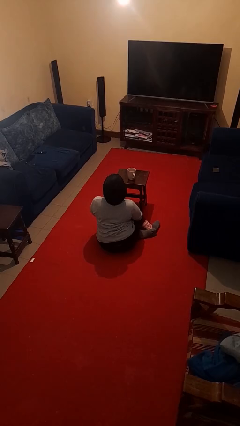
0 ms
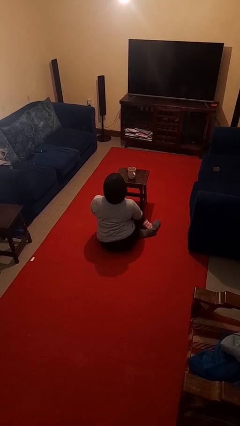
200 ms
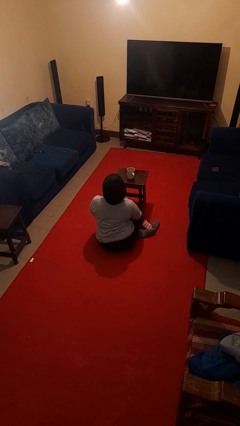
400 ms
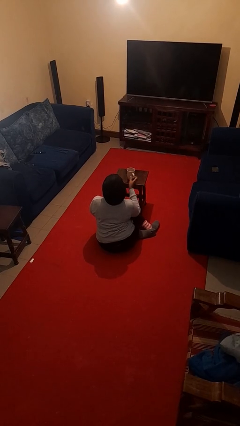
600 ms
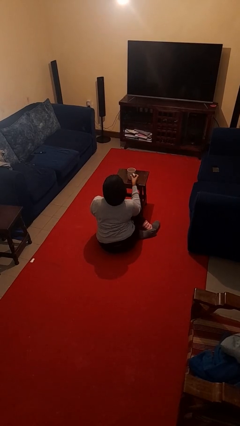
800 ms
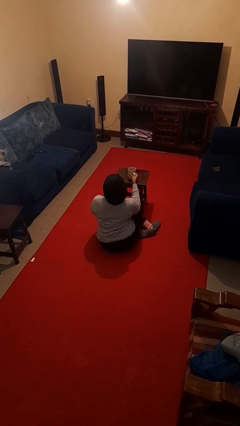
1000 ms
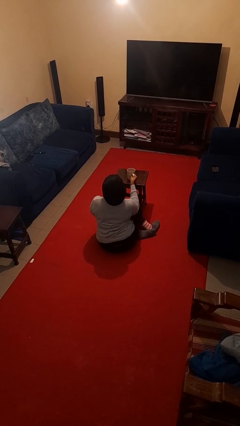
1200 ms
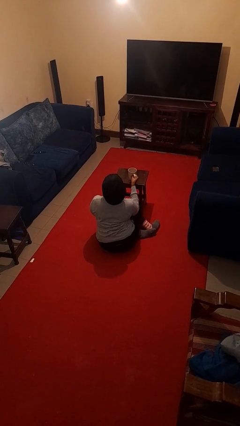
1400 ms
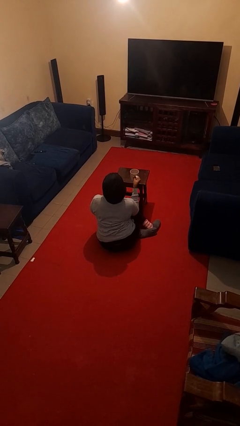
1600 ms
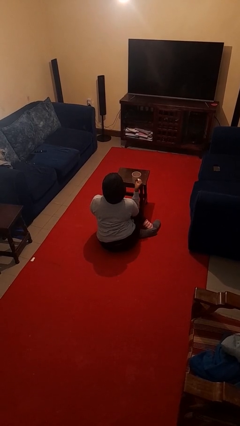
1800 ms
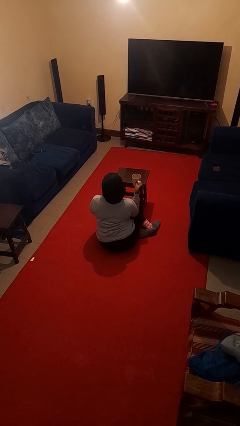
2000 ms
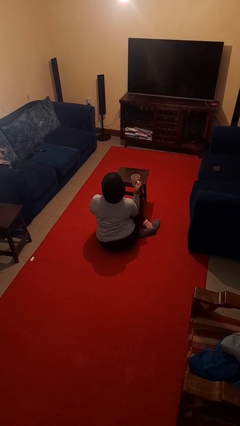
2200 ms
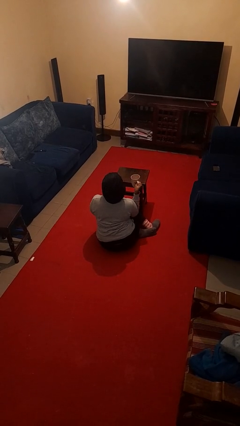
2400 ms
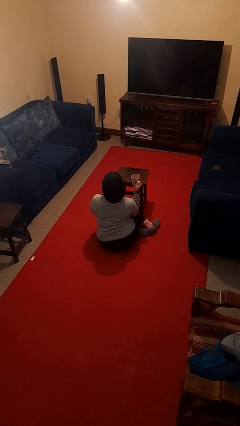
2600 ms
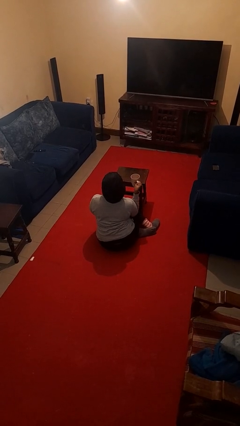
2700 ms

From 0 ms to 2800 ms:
person picks up object from table

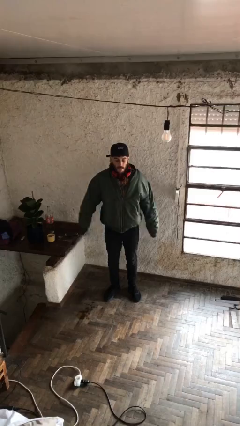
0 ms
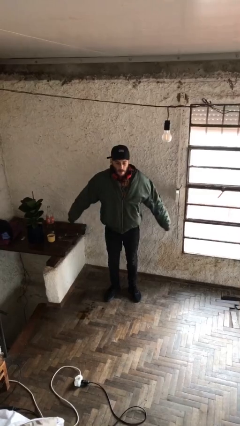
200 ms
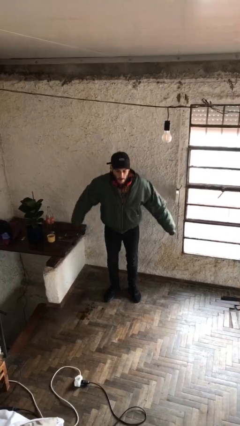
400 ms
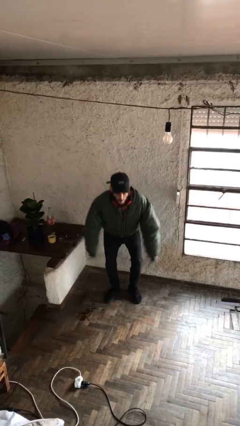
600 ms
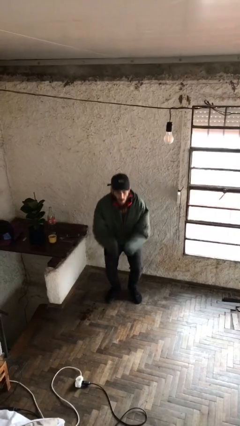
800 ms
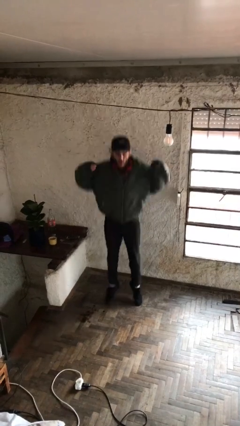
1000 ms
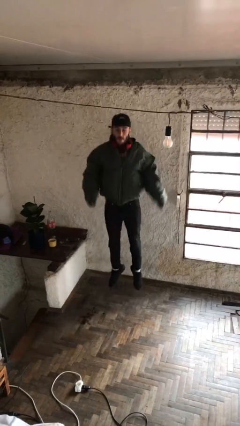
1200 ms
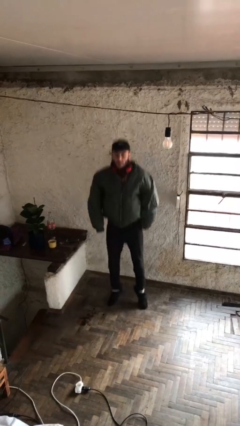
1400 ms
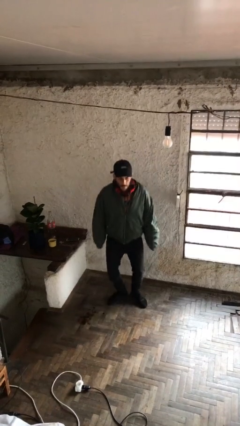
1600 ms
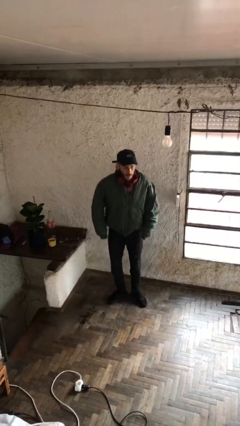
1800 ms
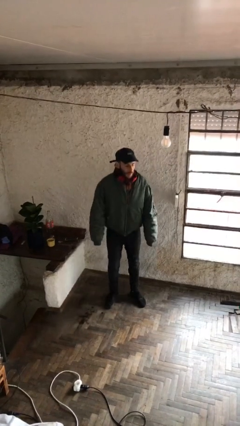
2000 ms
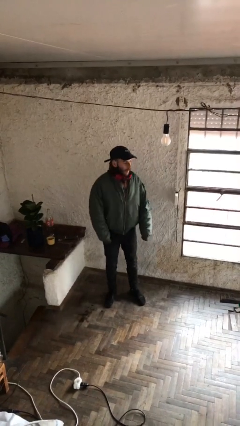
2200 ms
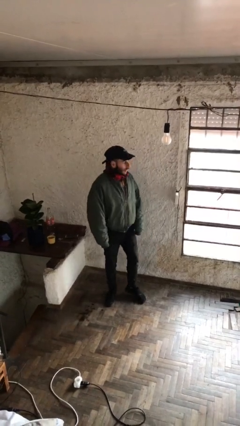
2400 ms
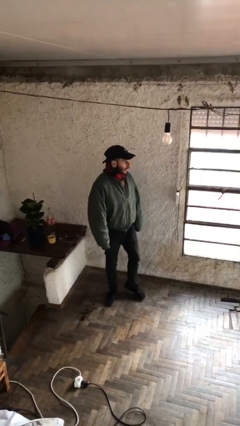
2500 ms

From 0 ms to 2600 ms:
person jumps

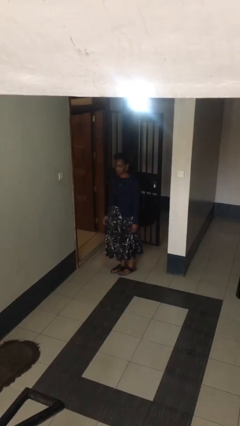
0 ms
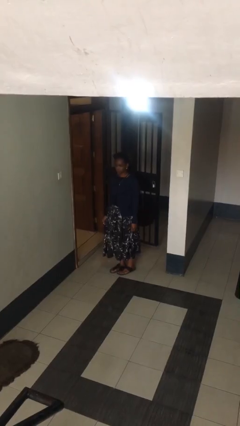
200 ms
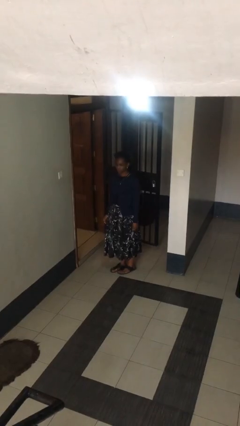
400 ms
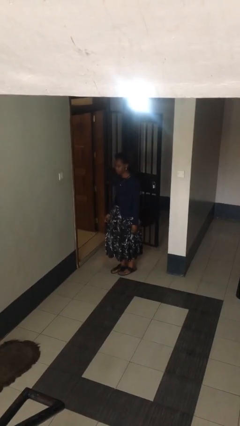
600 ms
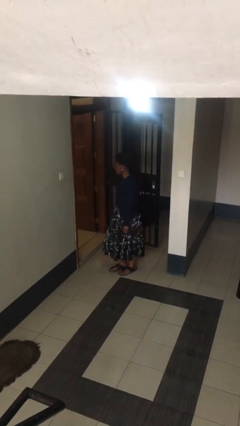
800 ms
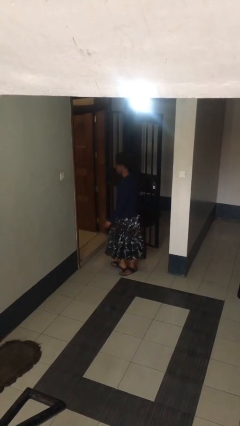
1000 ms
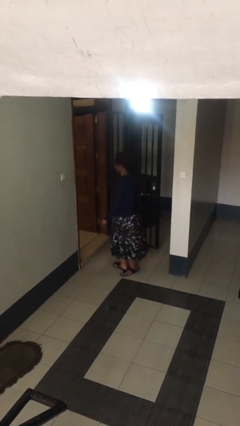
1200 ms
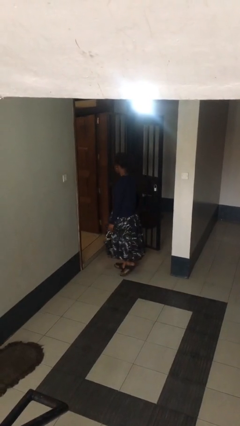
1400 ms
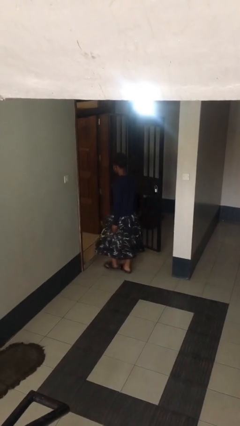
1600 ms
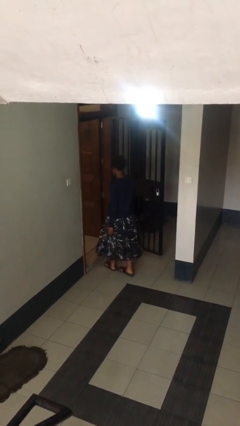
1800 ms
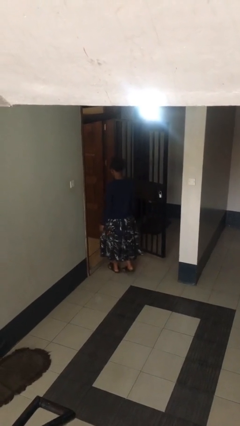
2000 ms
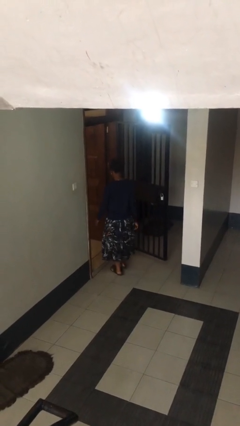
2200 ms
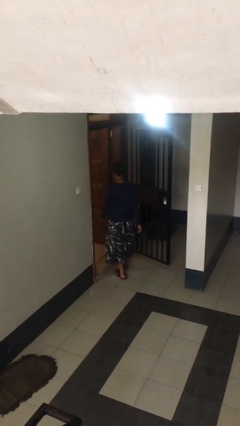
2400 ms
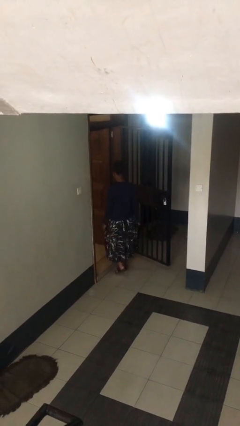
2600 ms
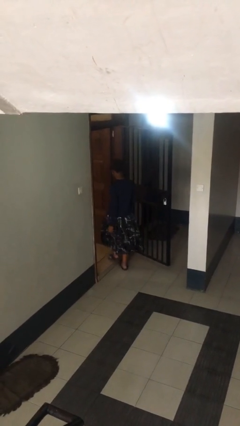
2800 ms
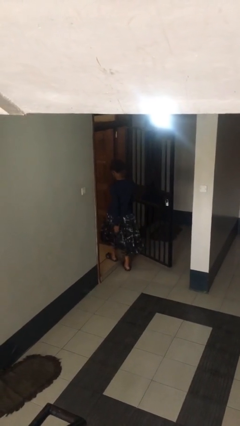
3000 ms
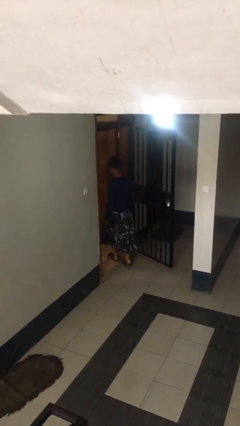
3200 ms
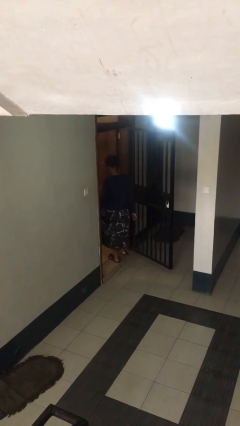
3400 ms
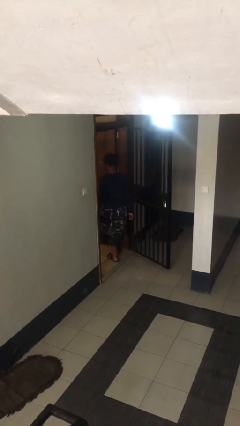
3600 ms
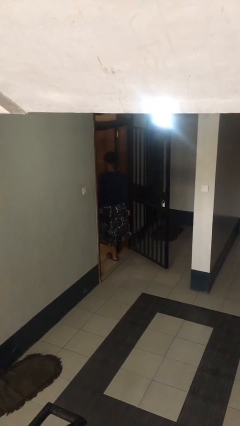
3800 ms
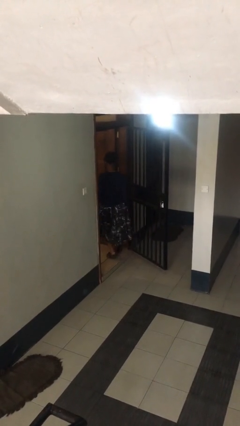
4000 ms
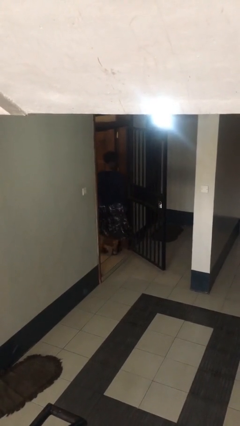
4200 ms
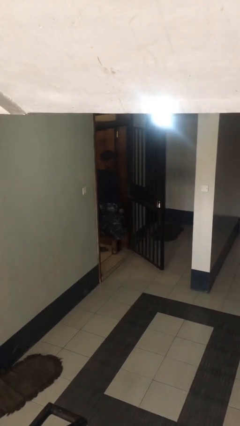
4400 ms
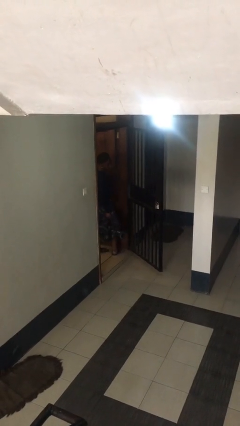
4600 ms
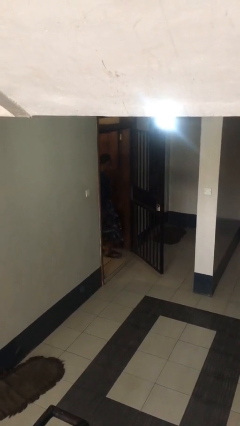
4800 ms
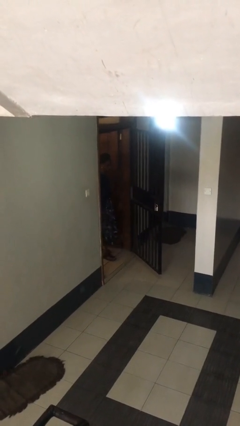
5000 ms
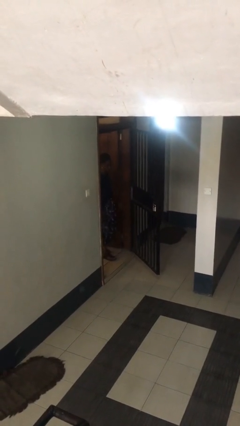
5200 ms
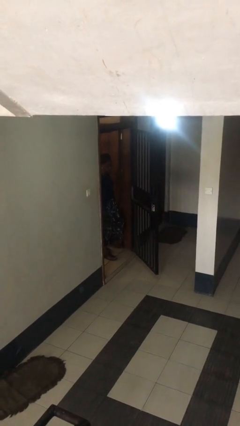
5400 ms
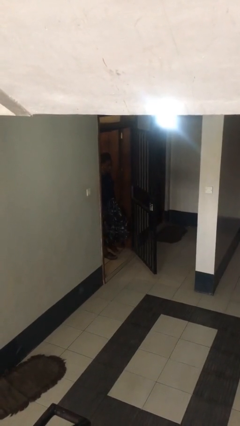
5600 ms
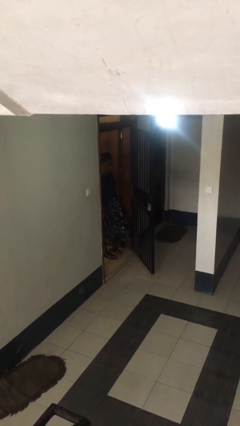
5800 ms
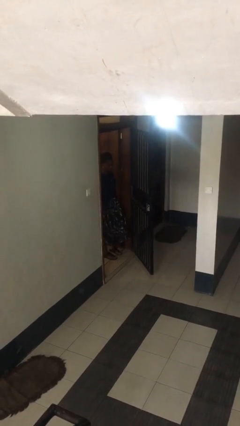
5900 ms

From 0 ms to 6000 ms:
person exits scene through structure

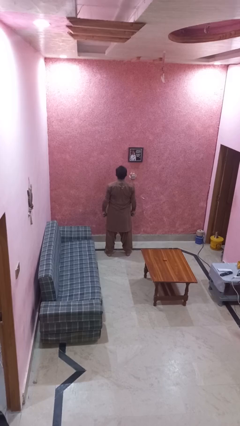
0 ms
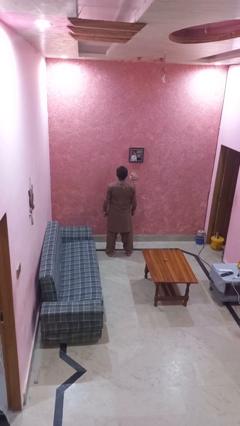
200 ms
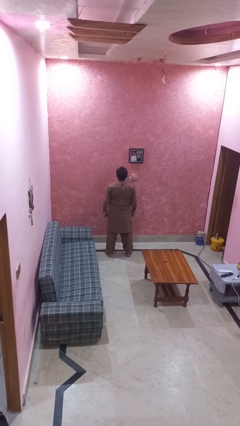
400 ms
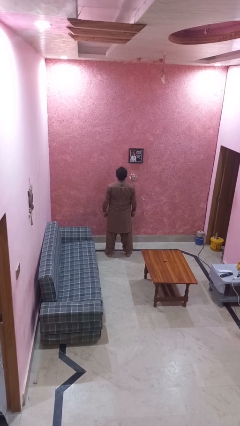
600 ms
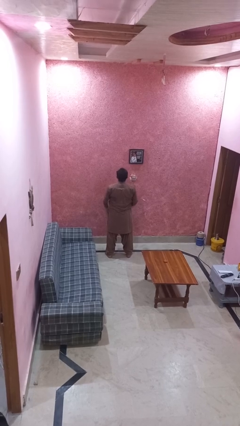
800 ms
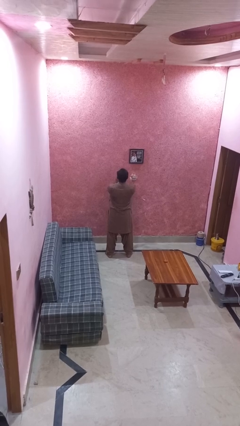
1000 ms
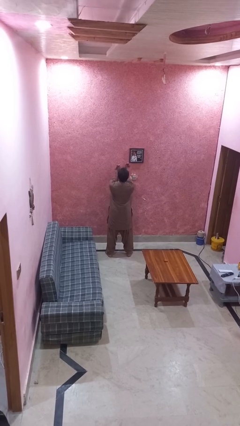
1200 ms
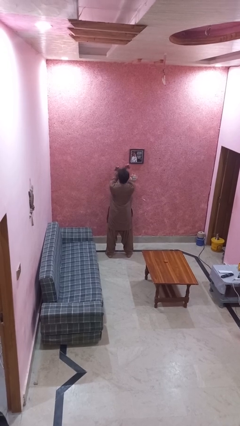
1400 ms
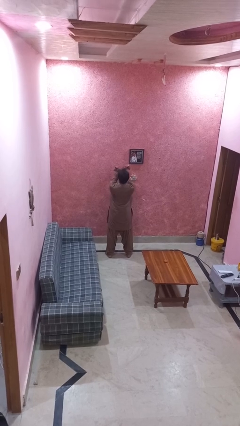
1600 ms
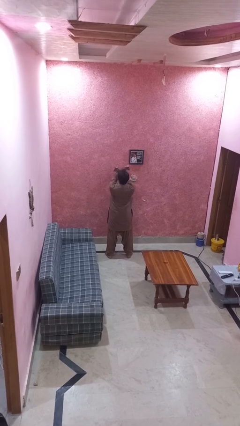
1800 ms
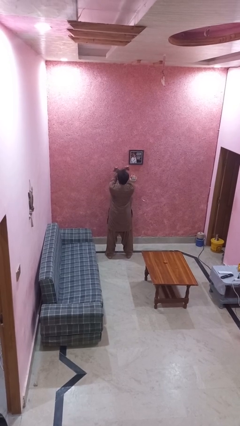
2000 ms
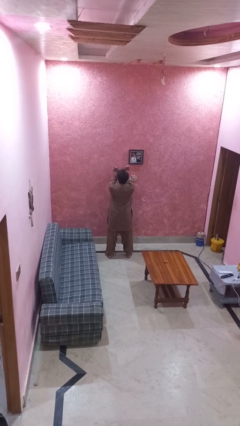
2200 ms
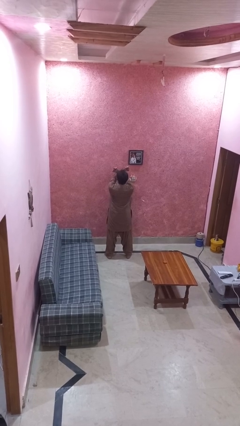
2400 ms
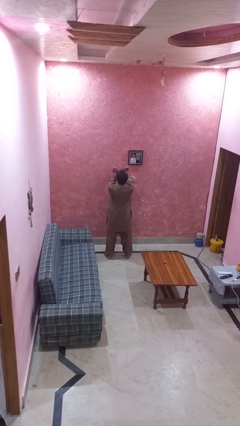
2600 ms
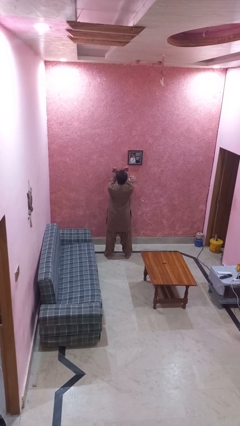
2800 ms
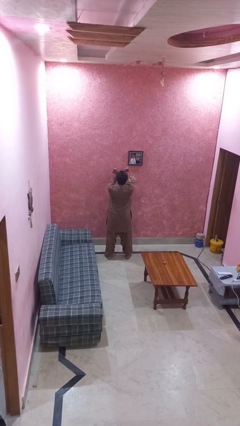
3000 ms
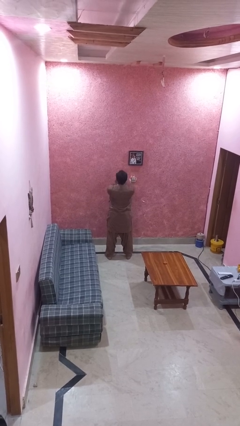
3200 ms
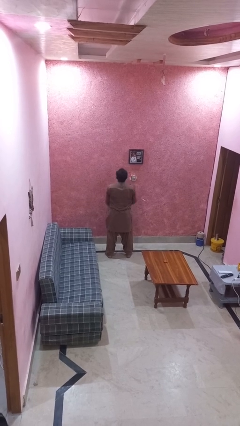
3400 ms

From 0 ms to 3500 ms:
person gestures arms x

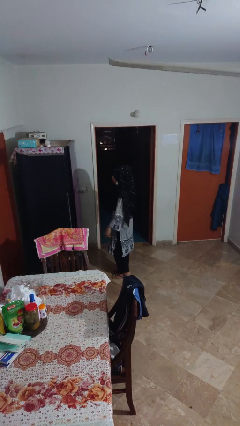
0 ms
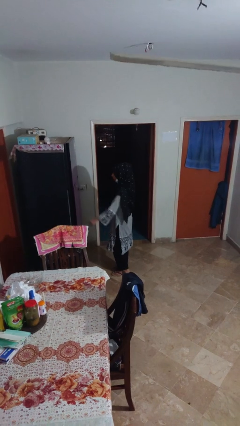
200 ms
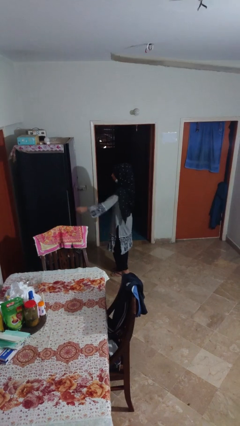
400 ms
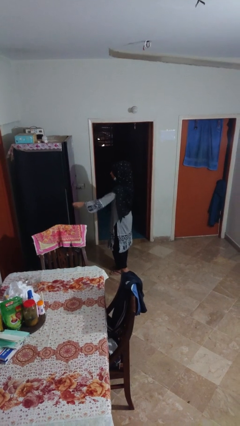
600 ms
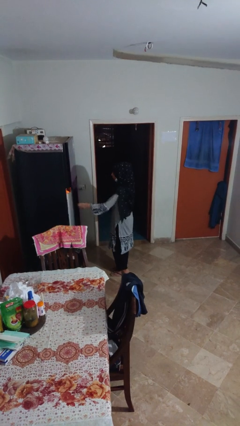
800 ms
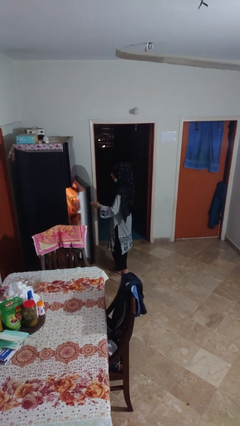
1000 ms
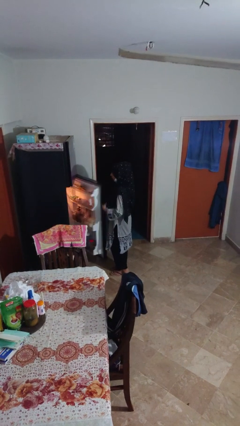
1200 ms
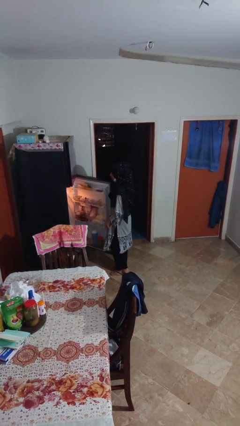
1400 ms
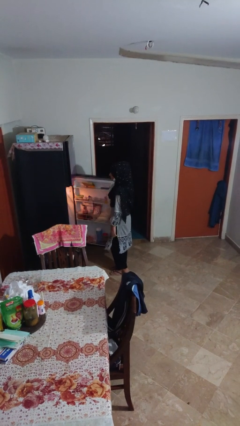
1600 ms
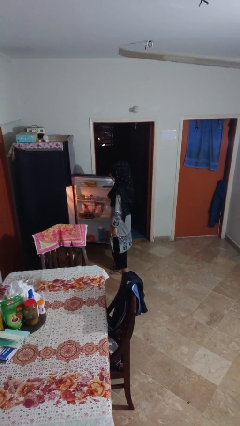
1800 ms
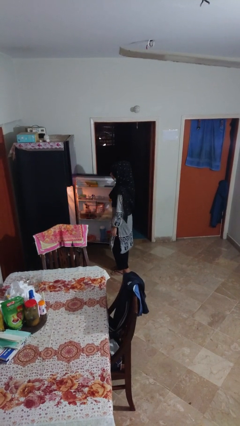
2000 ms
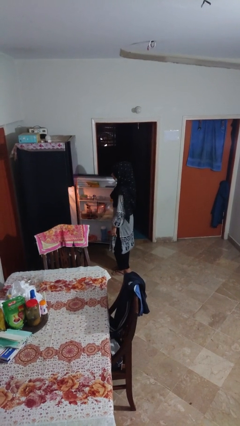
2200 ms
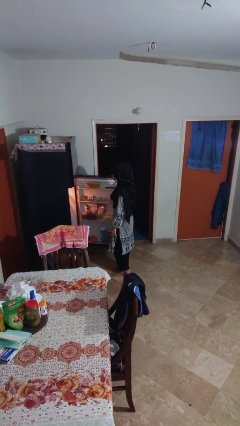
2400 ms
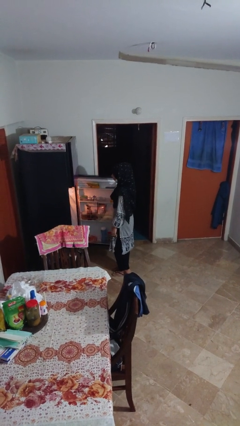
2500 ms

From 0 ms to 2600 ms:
person opens refrigerator

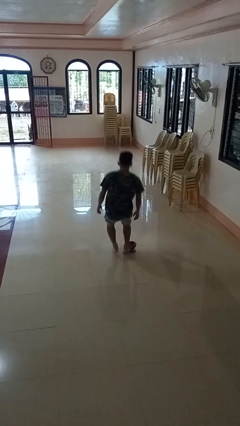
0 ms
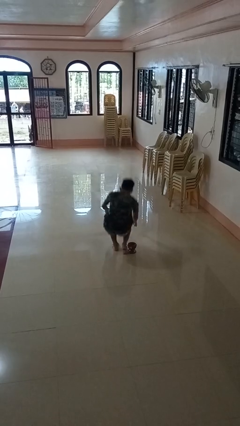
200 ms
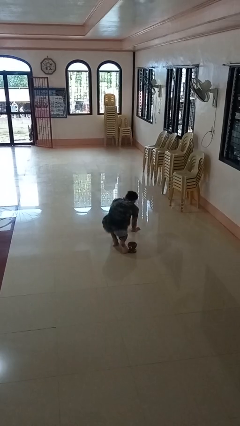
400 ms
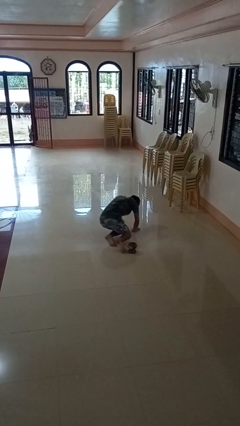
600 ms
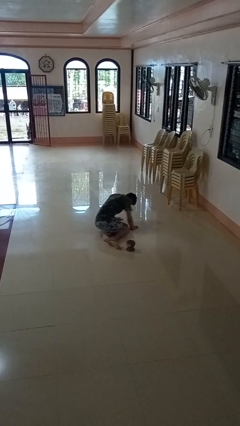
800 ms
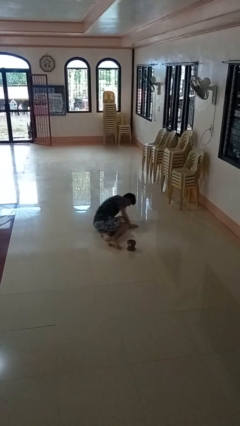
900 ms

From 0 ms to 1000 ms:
person trips on object on floor
